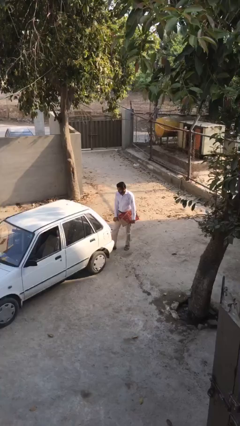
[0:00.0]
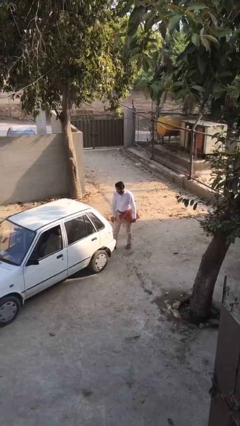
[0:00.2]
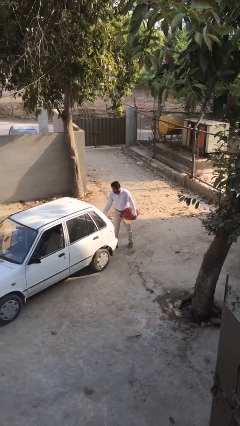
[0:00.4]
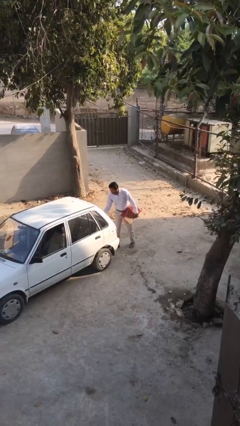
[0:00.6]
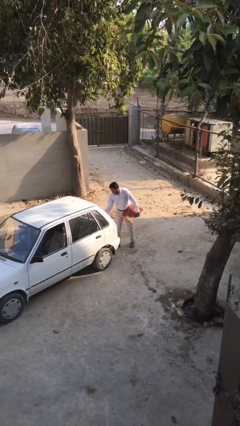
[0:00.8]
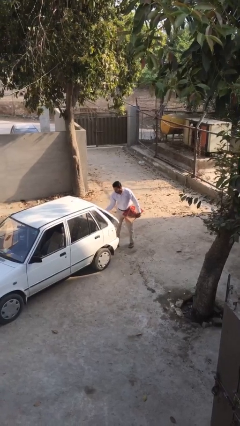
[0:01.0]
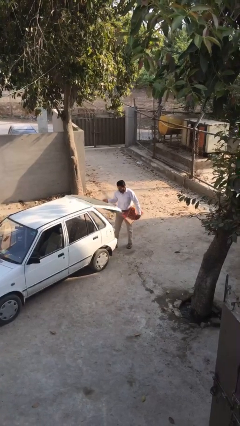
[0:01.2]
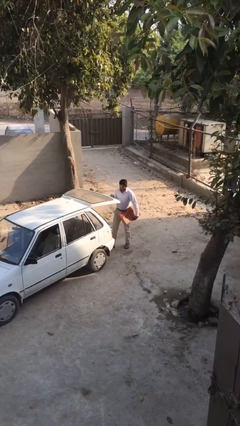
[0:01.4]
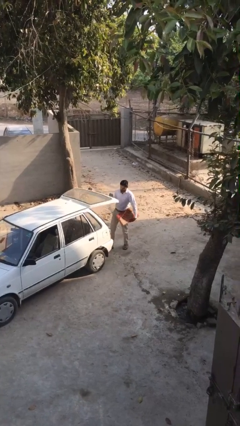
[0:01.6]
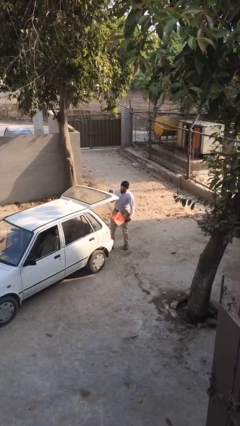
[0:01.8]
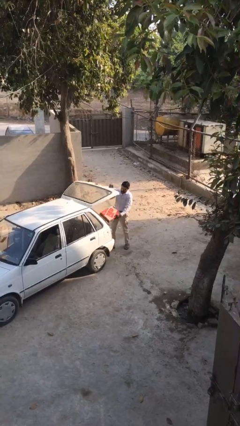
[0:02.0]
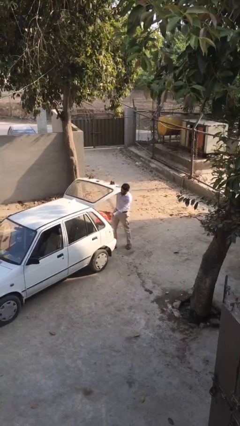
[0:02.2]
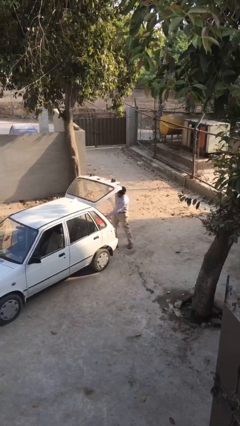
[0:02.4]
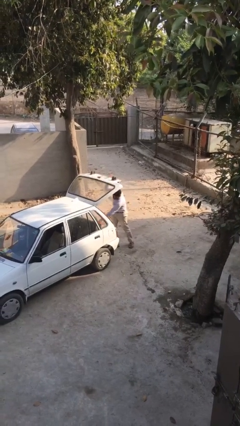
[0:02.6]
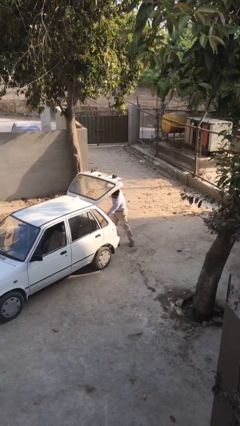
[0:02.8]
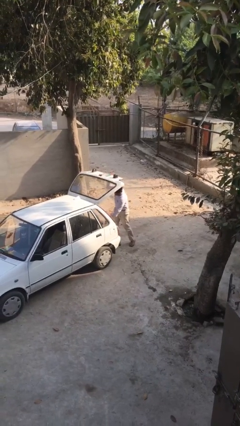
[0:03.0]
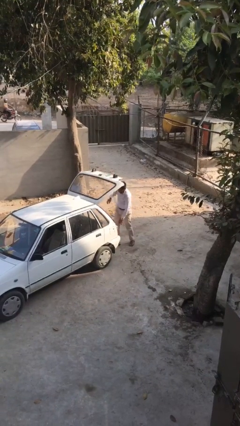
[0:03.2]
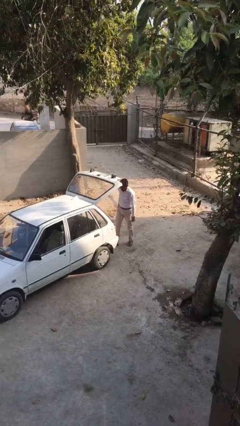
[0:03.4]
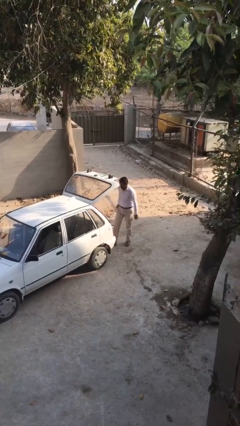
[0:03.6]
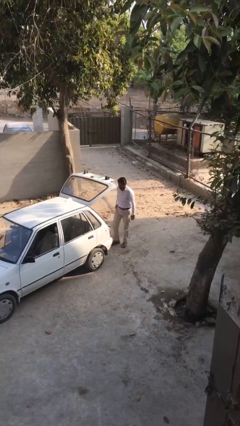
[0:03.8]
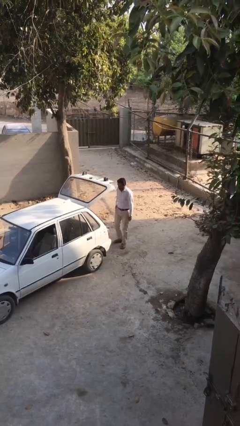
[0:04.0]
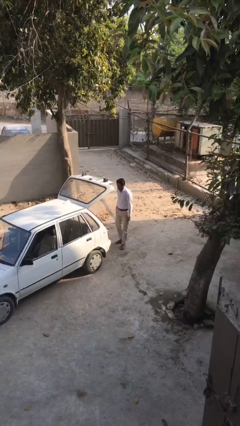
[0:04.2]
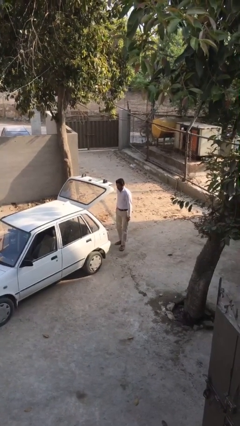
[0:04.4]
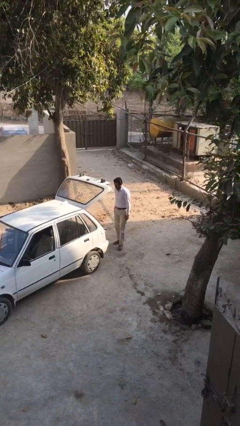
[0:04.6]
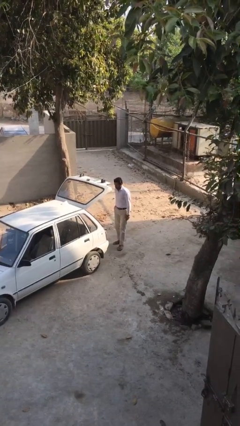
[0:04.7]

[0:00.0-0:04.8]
person loads car

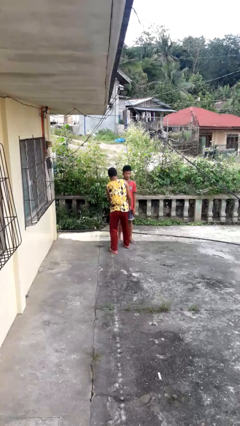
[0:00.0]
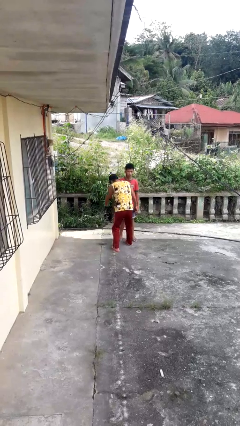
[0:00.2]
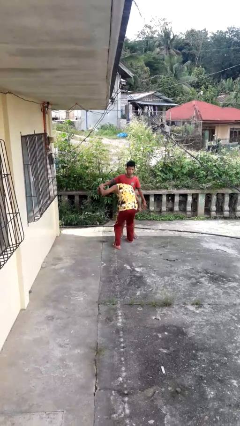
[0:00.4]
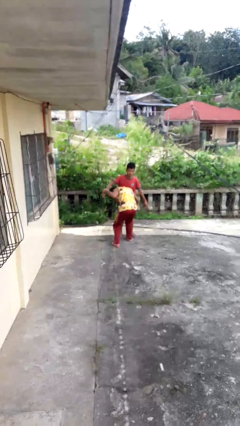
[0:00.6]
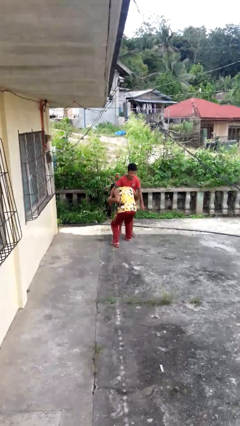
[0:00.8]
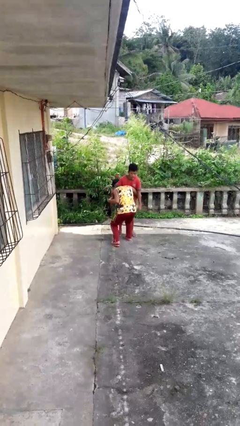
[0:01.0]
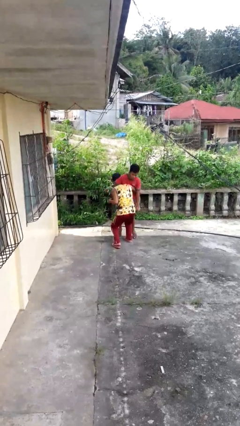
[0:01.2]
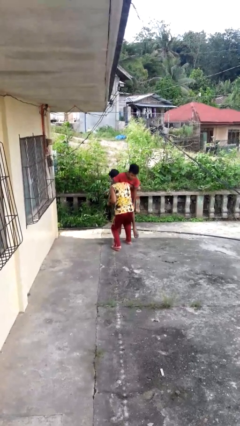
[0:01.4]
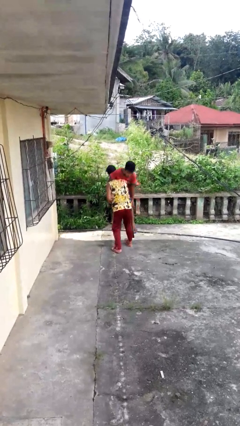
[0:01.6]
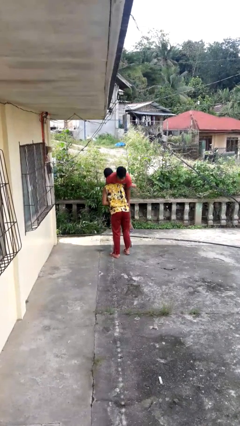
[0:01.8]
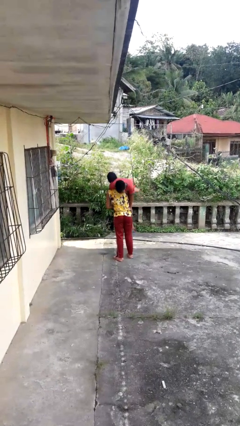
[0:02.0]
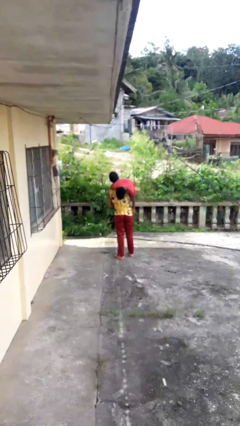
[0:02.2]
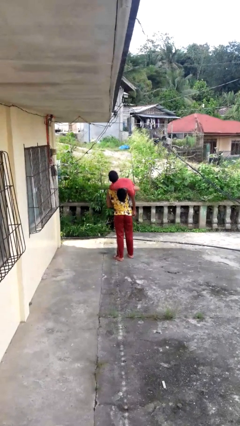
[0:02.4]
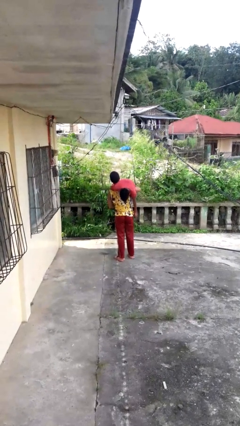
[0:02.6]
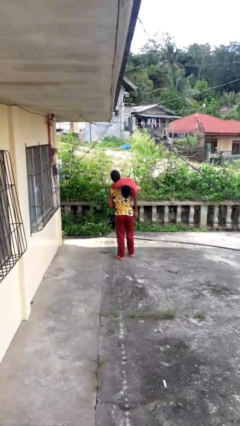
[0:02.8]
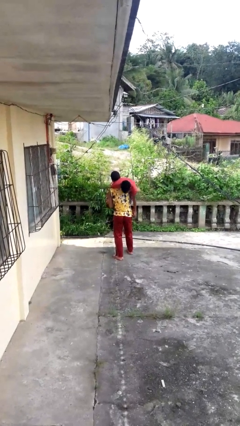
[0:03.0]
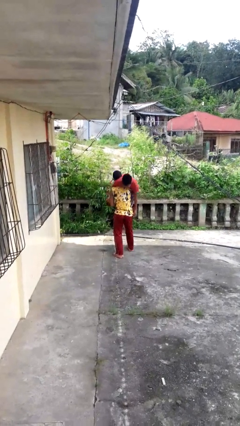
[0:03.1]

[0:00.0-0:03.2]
person carries person over shoulder

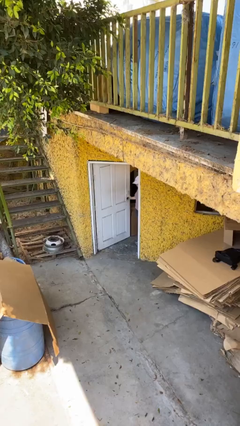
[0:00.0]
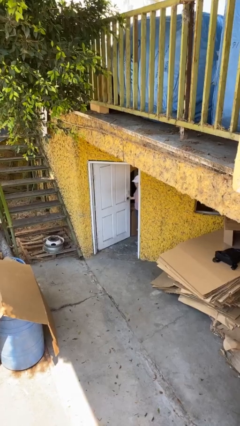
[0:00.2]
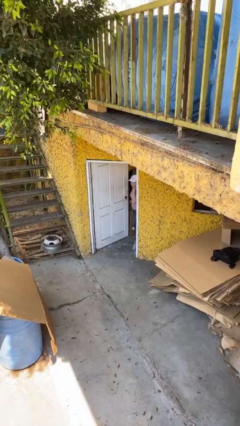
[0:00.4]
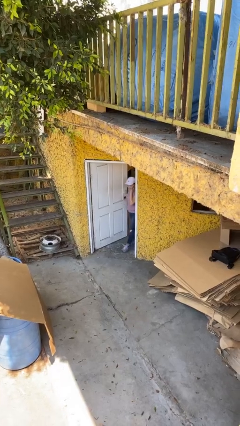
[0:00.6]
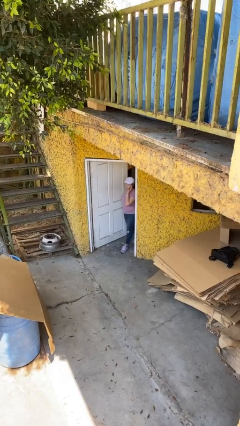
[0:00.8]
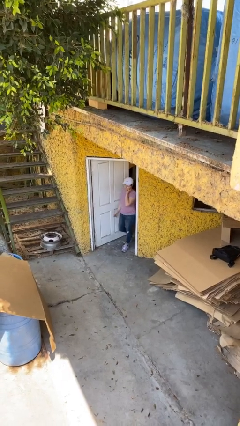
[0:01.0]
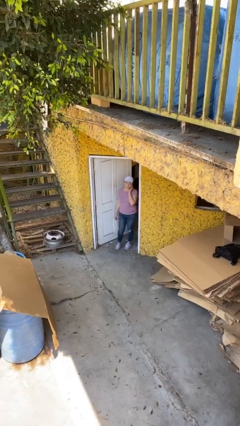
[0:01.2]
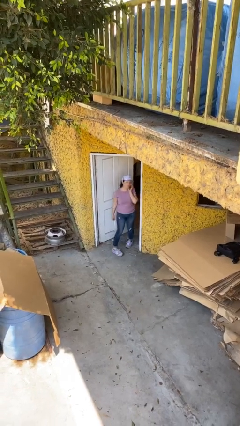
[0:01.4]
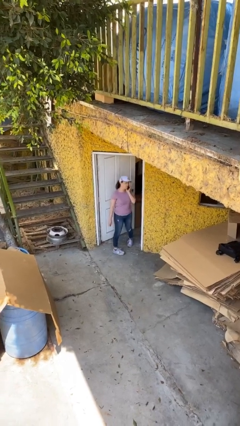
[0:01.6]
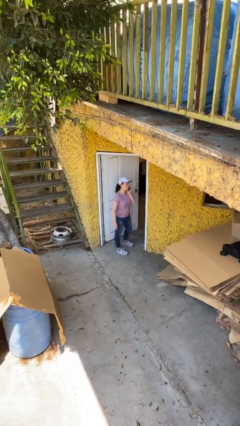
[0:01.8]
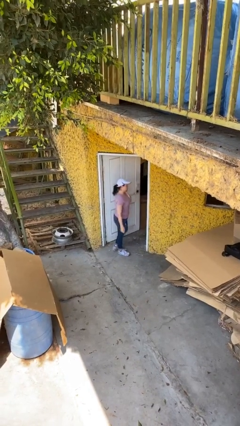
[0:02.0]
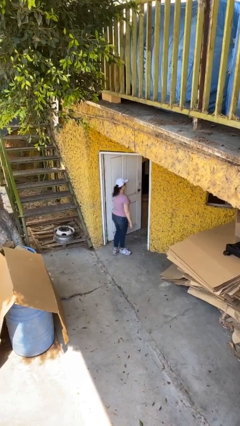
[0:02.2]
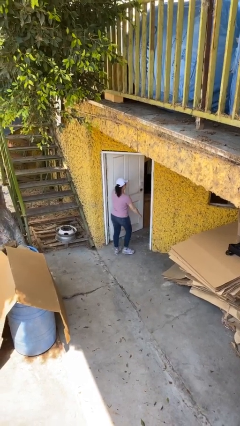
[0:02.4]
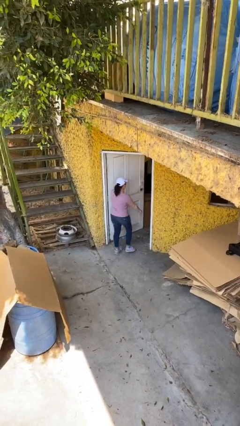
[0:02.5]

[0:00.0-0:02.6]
person enters scene through structure

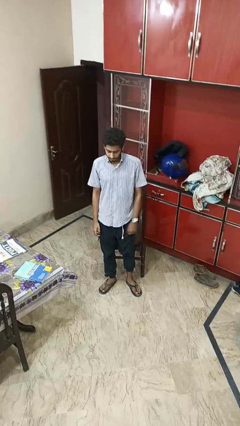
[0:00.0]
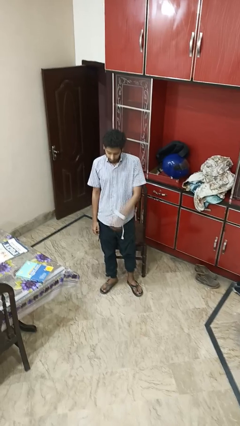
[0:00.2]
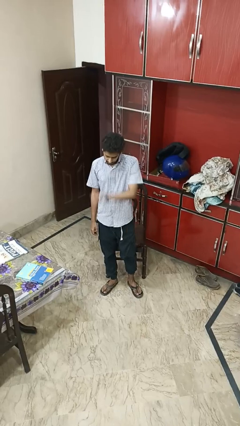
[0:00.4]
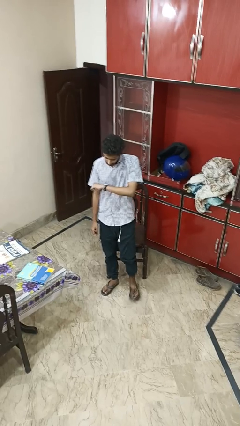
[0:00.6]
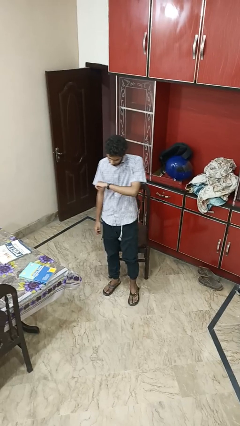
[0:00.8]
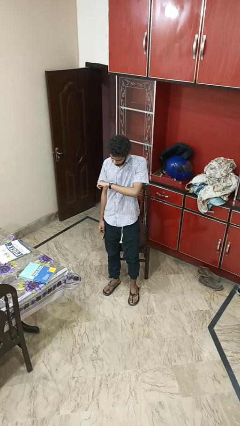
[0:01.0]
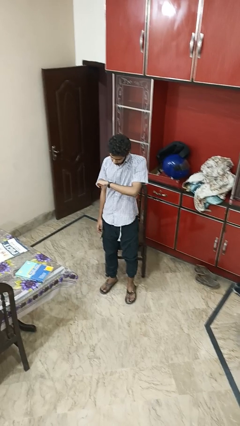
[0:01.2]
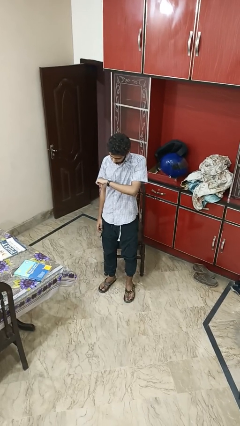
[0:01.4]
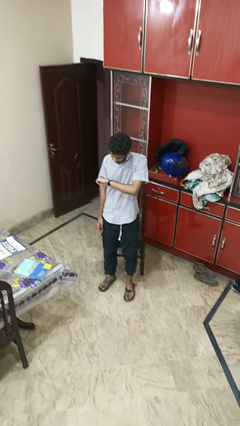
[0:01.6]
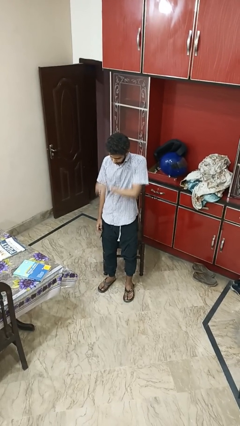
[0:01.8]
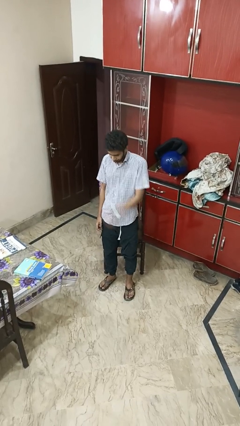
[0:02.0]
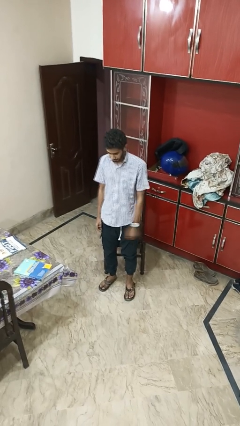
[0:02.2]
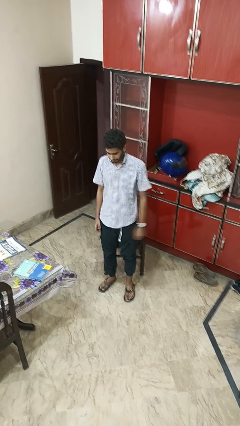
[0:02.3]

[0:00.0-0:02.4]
person looks at wristwatch

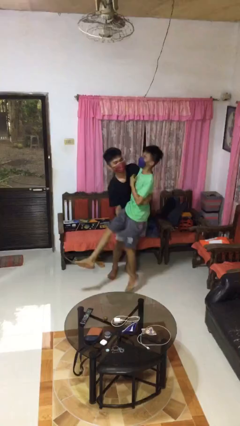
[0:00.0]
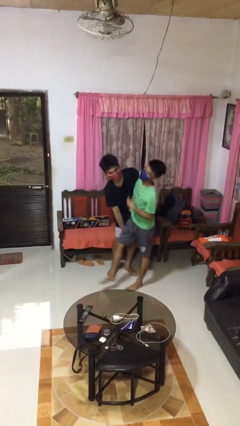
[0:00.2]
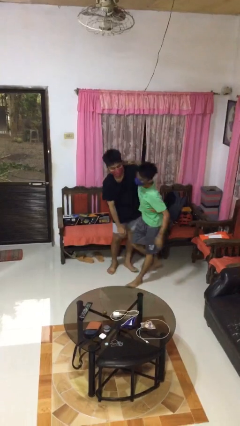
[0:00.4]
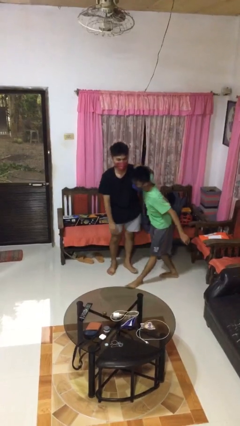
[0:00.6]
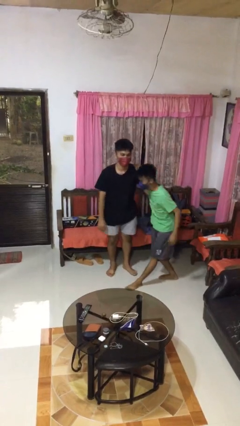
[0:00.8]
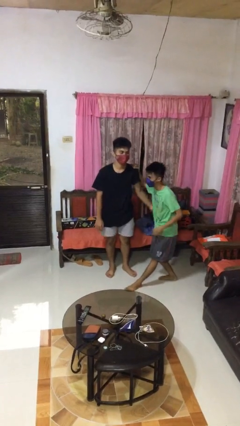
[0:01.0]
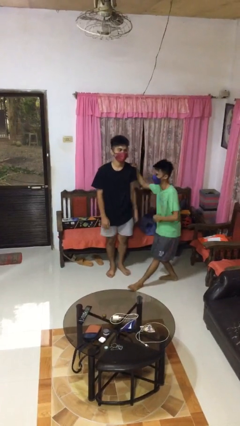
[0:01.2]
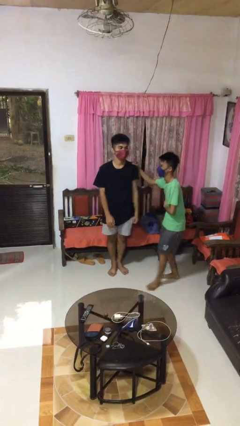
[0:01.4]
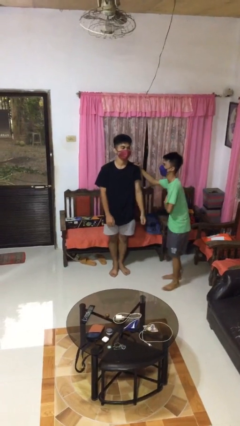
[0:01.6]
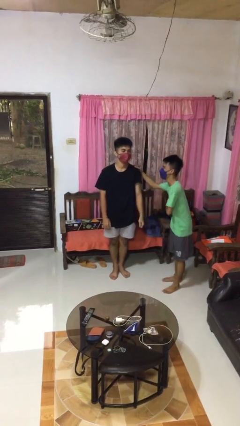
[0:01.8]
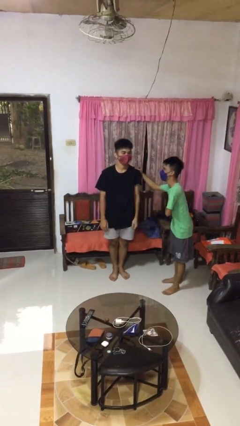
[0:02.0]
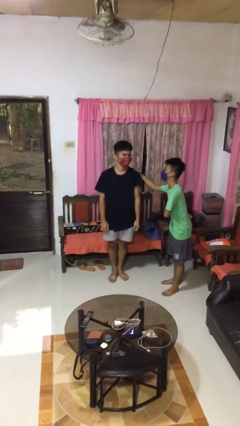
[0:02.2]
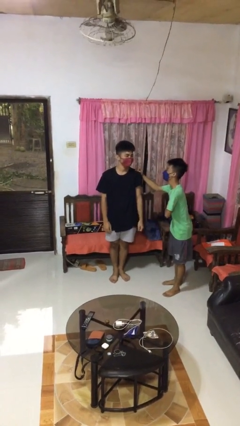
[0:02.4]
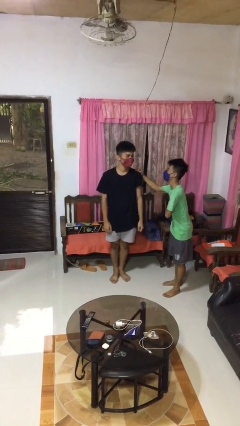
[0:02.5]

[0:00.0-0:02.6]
person puts down person

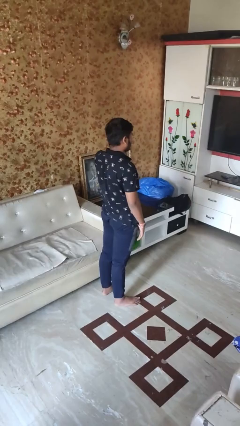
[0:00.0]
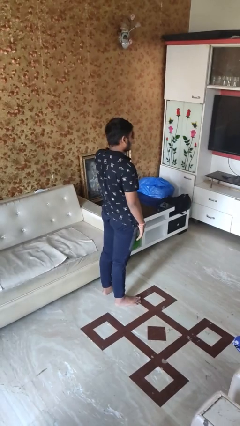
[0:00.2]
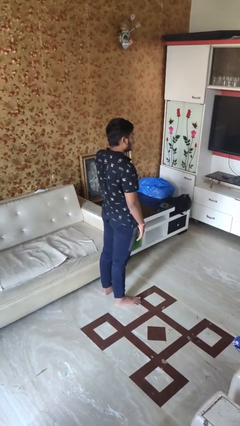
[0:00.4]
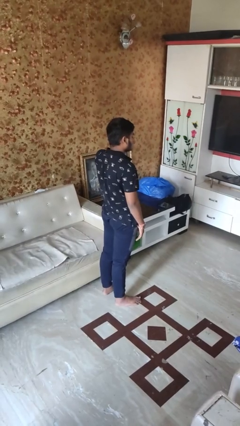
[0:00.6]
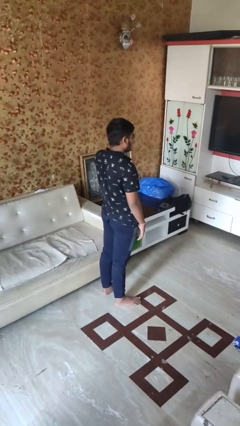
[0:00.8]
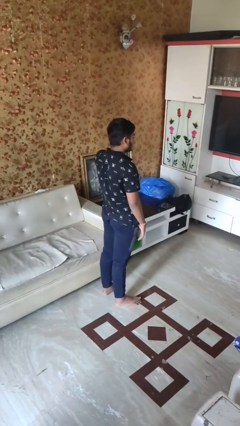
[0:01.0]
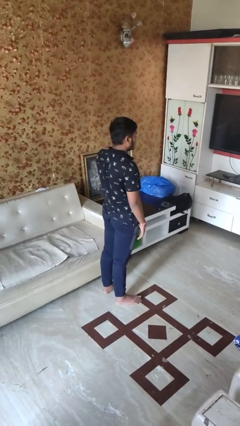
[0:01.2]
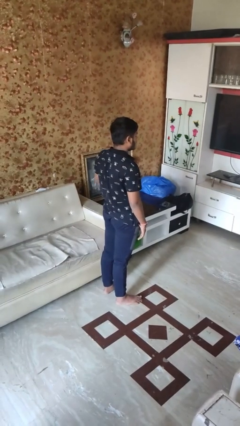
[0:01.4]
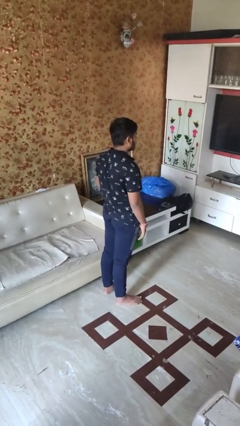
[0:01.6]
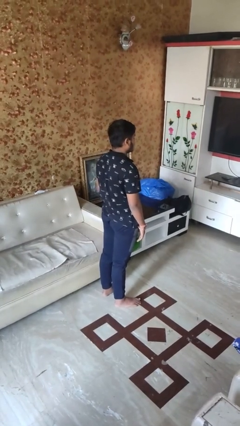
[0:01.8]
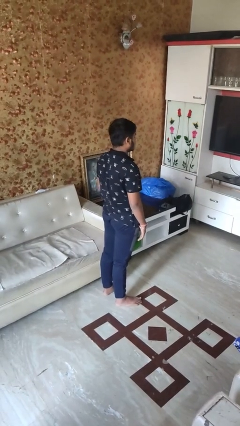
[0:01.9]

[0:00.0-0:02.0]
person rubs eyes
